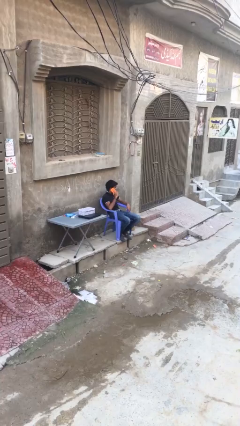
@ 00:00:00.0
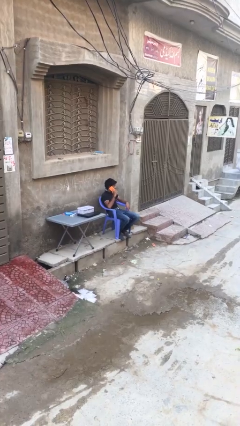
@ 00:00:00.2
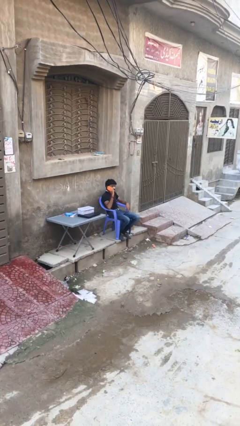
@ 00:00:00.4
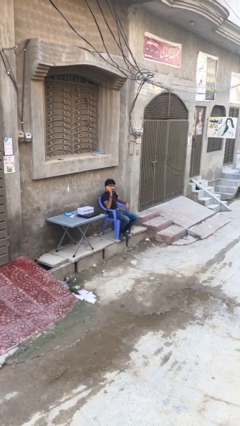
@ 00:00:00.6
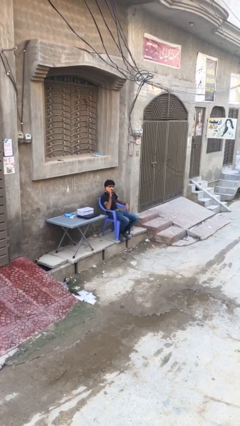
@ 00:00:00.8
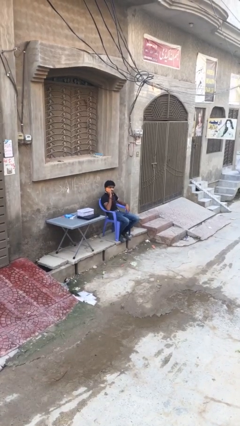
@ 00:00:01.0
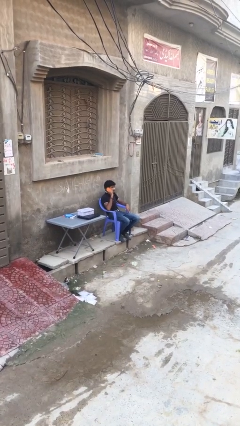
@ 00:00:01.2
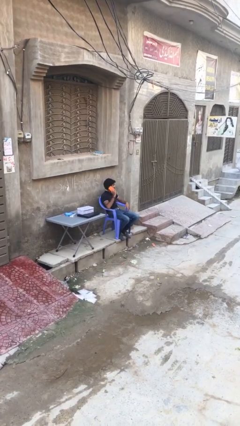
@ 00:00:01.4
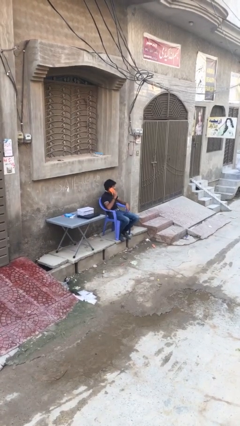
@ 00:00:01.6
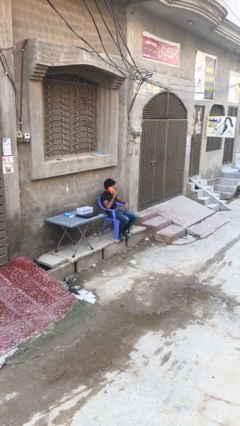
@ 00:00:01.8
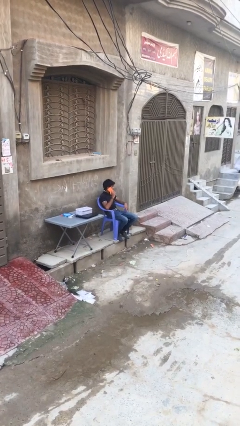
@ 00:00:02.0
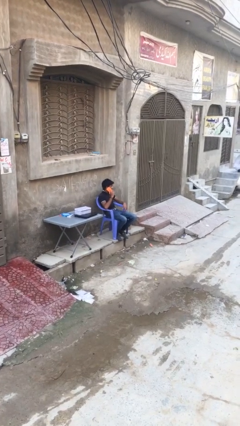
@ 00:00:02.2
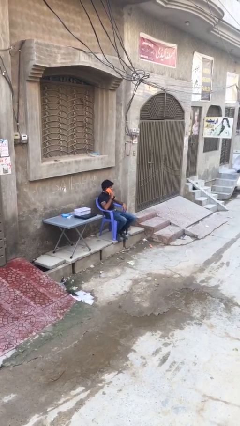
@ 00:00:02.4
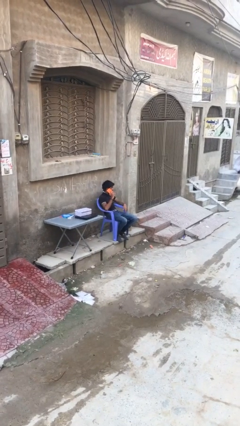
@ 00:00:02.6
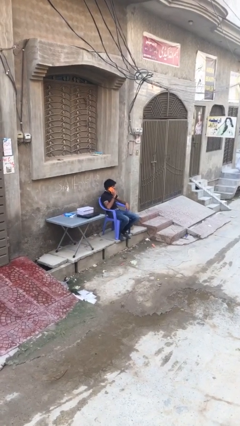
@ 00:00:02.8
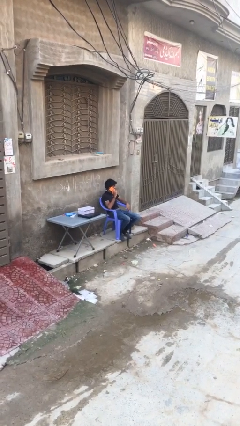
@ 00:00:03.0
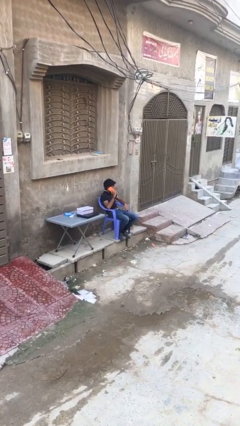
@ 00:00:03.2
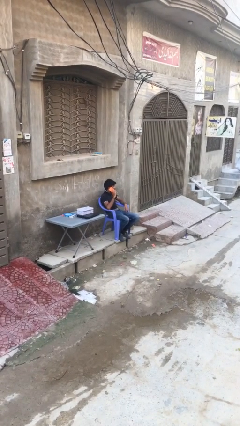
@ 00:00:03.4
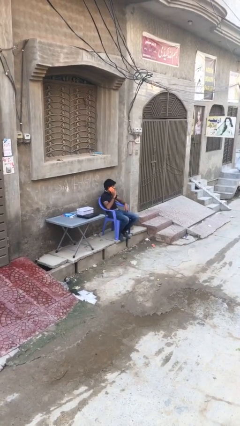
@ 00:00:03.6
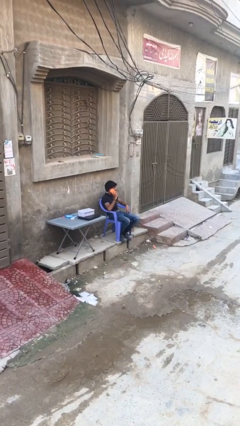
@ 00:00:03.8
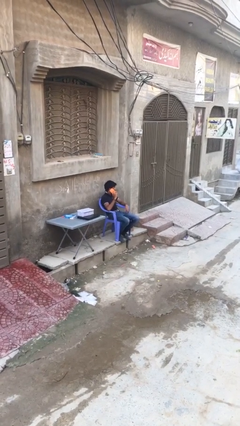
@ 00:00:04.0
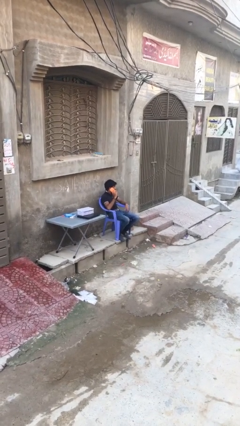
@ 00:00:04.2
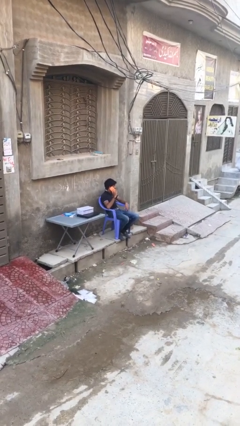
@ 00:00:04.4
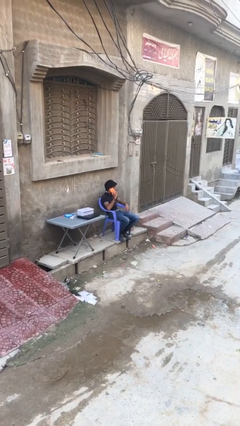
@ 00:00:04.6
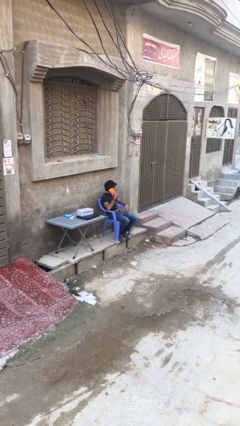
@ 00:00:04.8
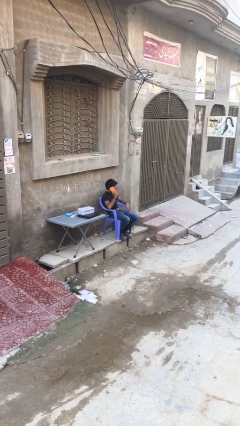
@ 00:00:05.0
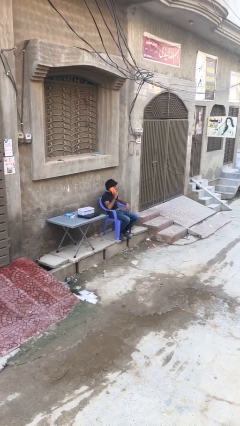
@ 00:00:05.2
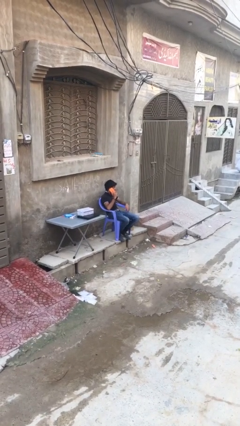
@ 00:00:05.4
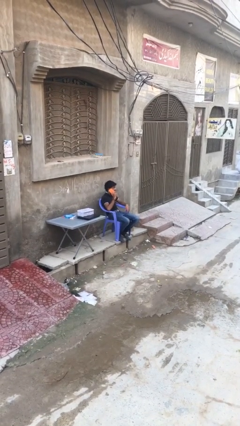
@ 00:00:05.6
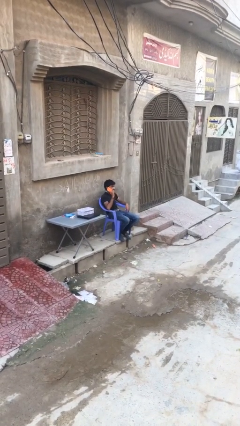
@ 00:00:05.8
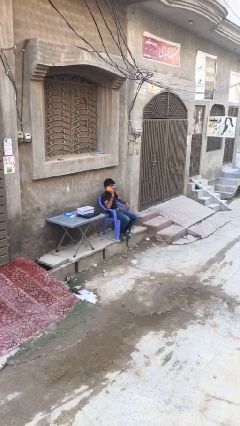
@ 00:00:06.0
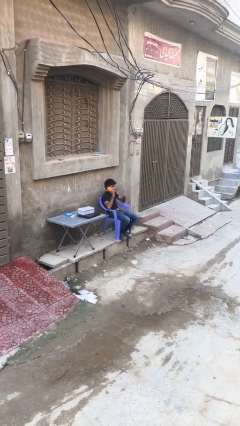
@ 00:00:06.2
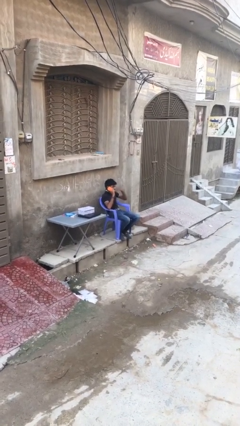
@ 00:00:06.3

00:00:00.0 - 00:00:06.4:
person talks on phone

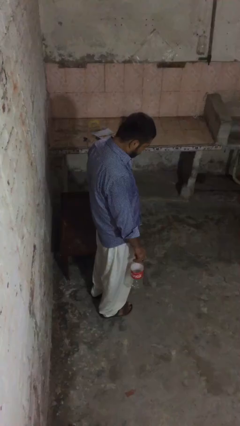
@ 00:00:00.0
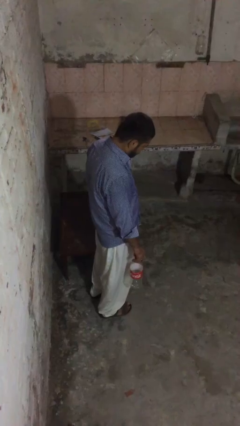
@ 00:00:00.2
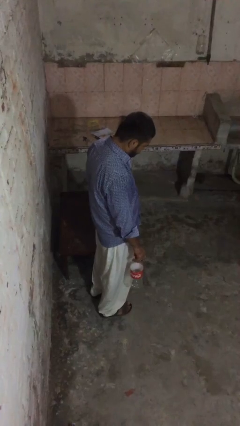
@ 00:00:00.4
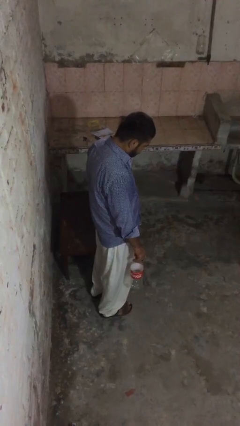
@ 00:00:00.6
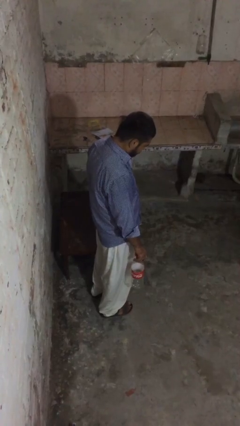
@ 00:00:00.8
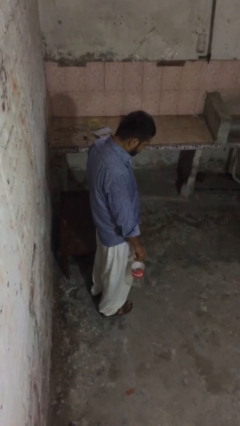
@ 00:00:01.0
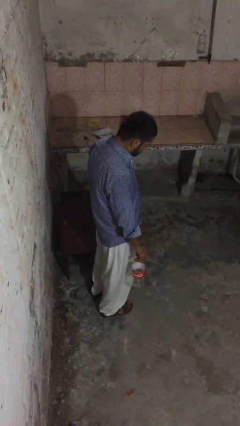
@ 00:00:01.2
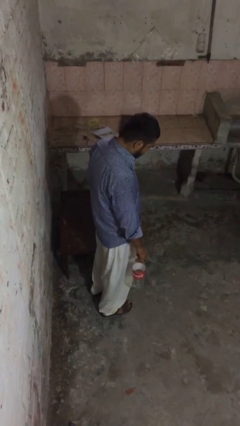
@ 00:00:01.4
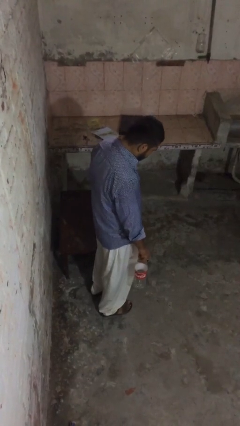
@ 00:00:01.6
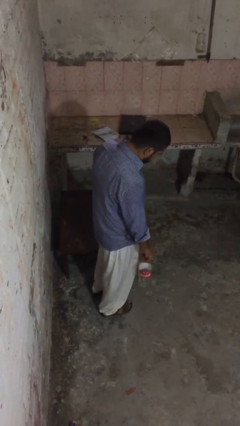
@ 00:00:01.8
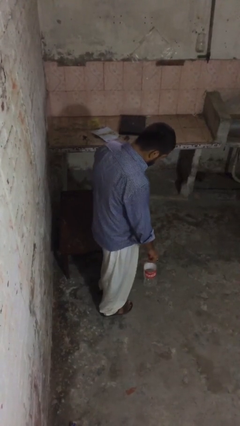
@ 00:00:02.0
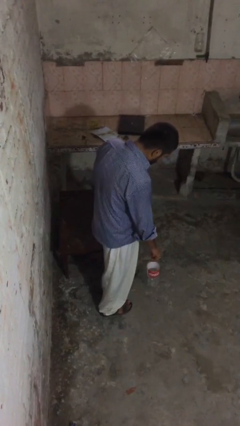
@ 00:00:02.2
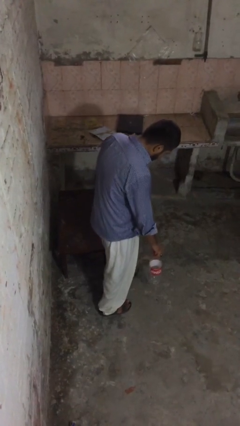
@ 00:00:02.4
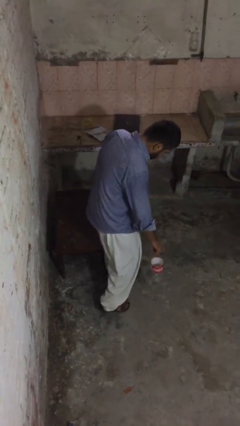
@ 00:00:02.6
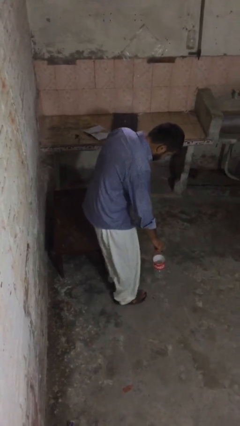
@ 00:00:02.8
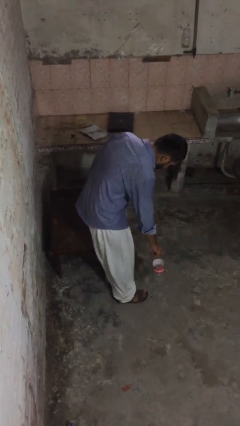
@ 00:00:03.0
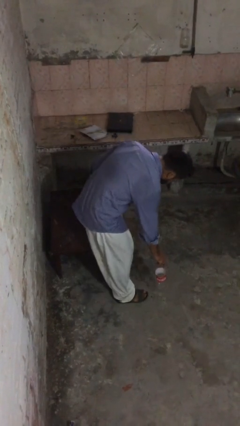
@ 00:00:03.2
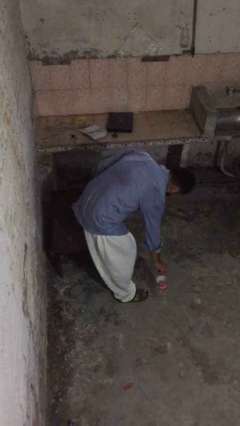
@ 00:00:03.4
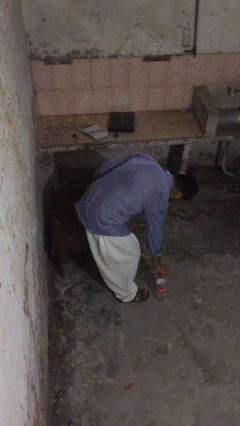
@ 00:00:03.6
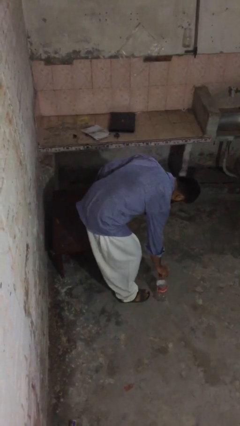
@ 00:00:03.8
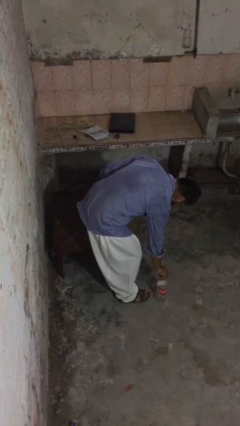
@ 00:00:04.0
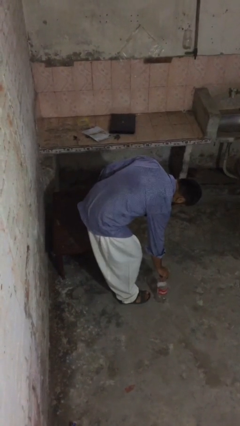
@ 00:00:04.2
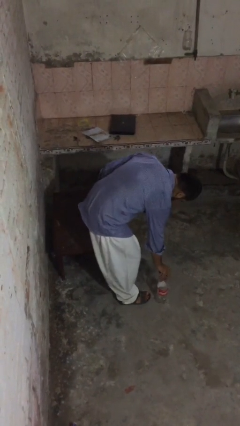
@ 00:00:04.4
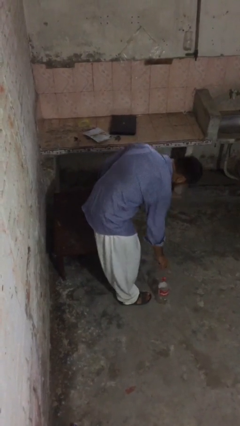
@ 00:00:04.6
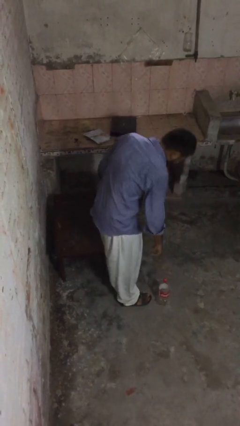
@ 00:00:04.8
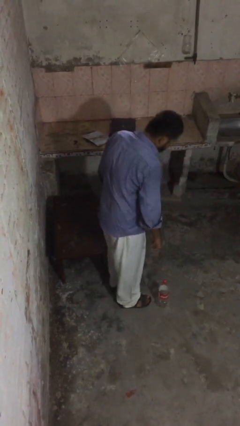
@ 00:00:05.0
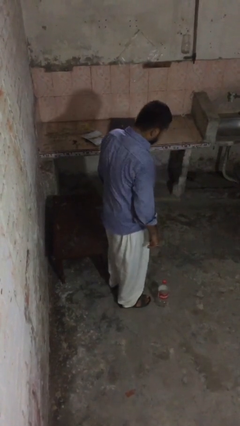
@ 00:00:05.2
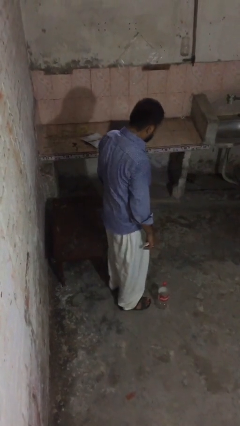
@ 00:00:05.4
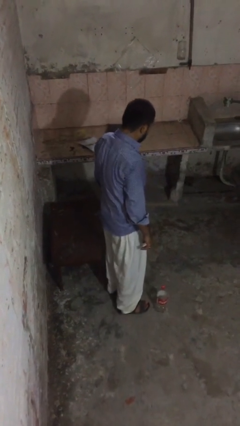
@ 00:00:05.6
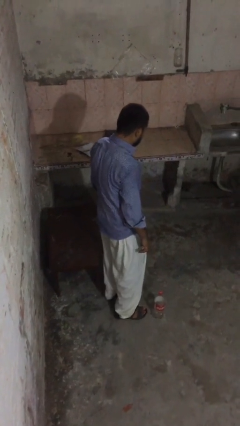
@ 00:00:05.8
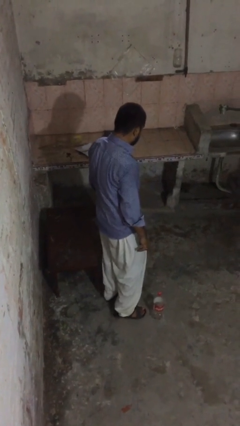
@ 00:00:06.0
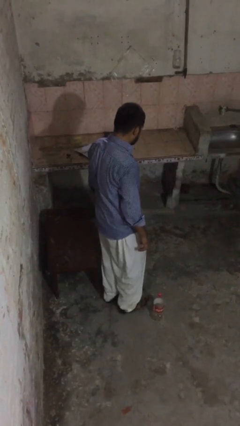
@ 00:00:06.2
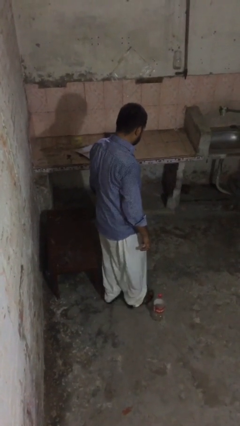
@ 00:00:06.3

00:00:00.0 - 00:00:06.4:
person puts down object on floor

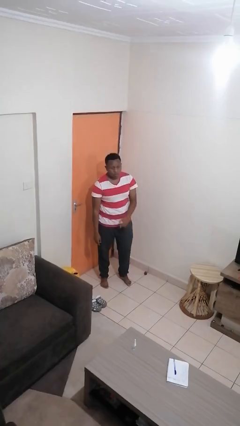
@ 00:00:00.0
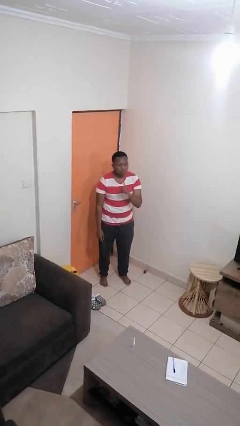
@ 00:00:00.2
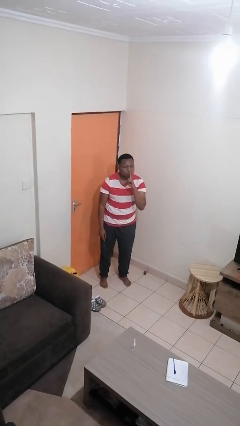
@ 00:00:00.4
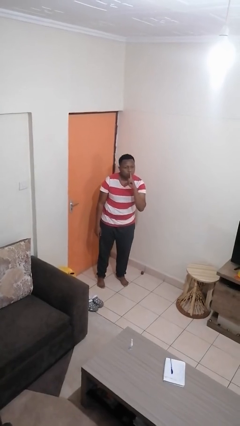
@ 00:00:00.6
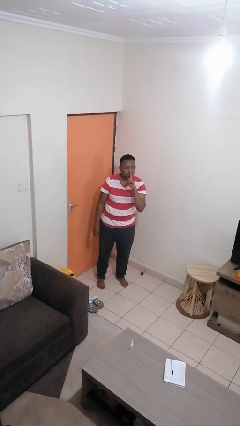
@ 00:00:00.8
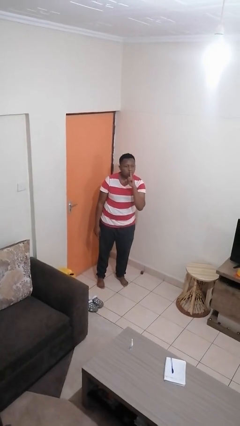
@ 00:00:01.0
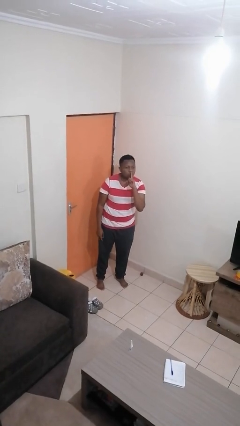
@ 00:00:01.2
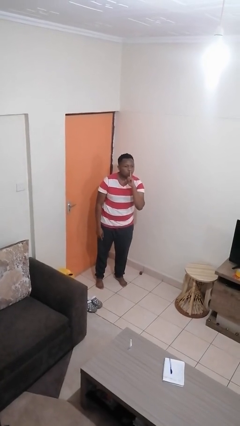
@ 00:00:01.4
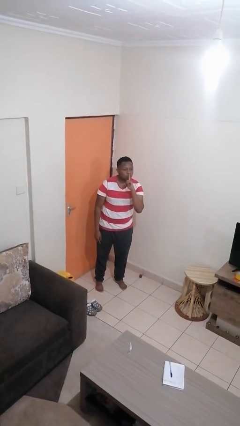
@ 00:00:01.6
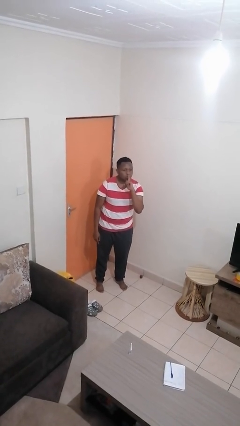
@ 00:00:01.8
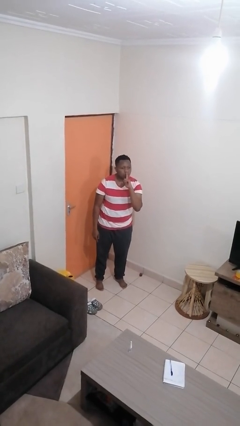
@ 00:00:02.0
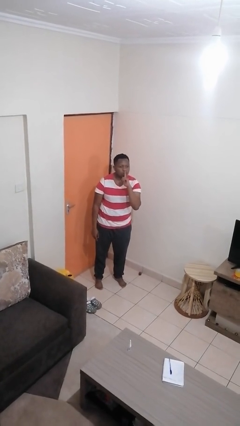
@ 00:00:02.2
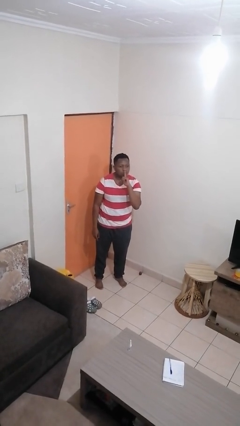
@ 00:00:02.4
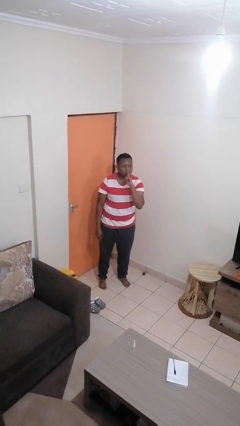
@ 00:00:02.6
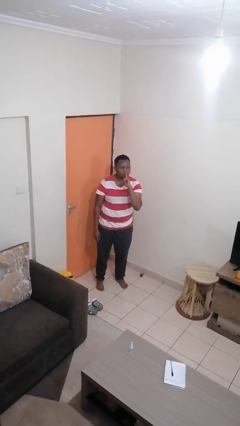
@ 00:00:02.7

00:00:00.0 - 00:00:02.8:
person gestures be quiet

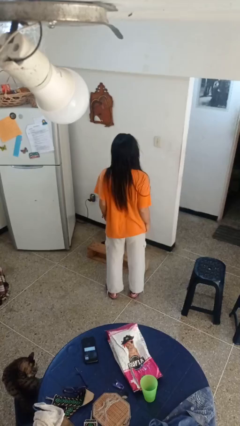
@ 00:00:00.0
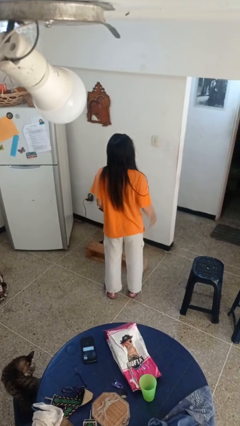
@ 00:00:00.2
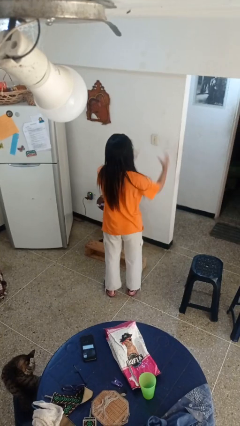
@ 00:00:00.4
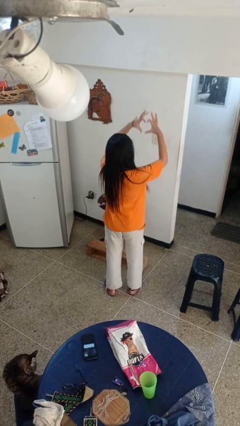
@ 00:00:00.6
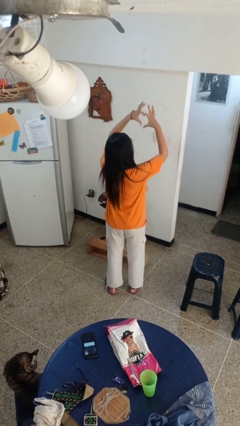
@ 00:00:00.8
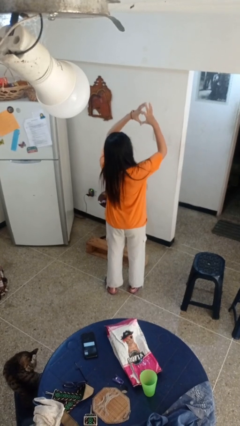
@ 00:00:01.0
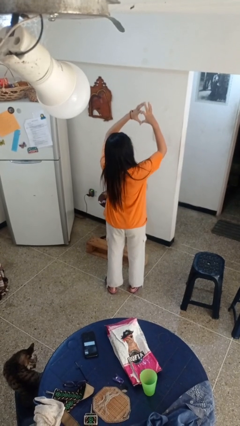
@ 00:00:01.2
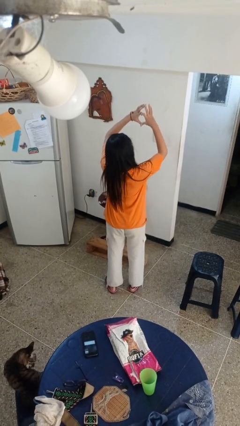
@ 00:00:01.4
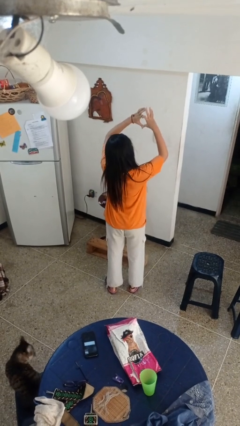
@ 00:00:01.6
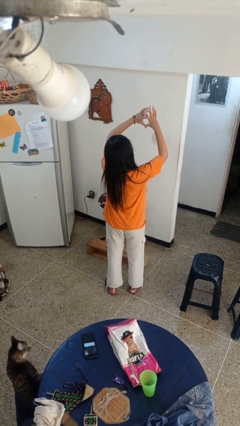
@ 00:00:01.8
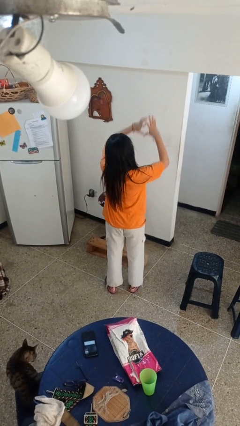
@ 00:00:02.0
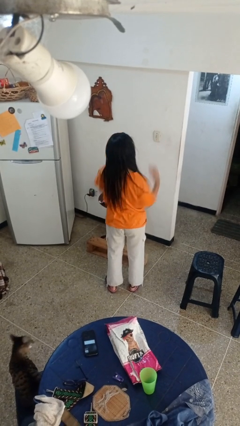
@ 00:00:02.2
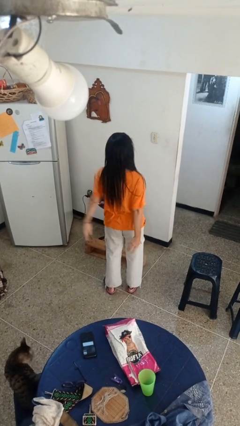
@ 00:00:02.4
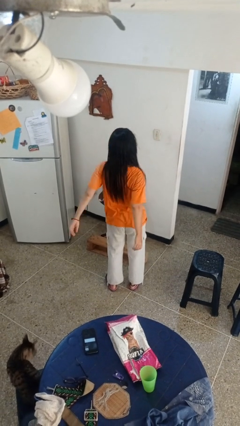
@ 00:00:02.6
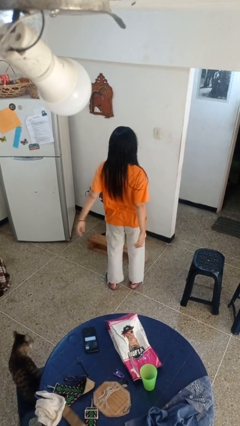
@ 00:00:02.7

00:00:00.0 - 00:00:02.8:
person gestures heart
